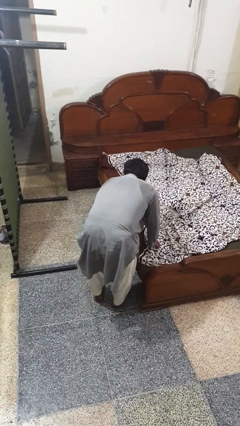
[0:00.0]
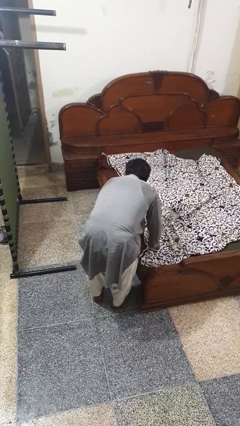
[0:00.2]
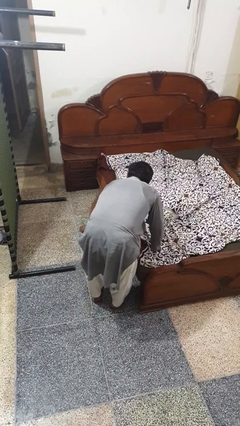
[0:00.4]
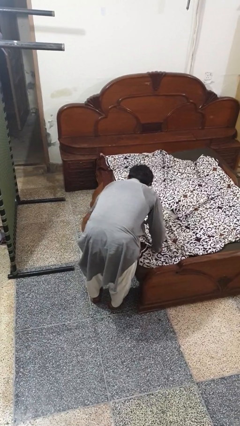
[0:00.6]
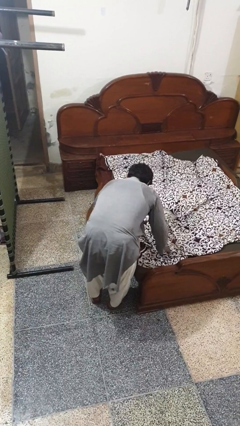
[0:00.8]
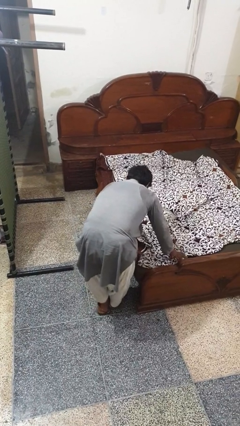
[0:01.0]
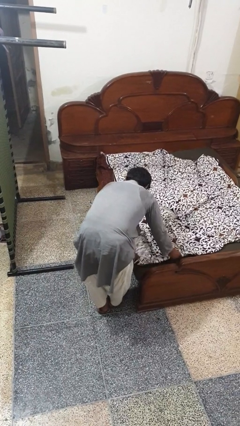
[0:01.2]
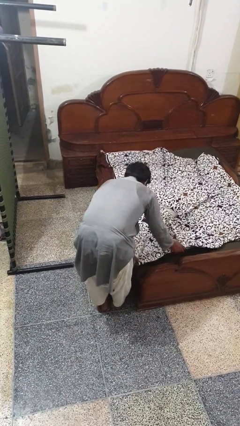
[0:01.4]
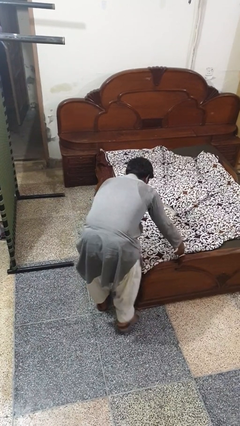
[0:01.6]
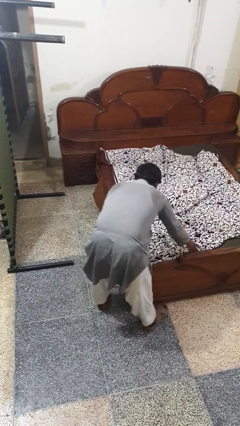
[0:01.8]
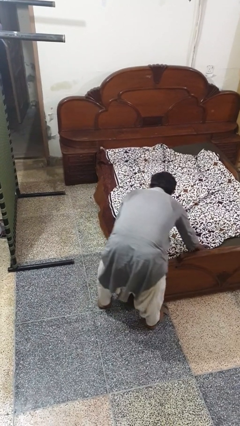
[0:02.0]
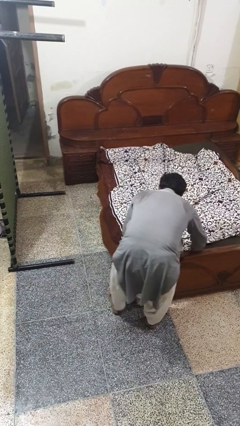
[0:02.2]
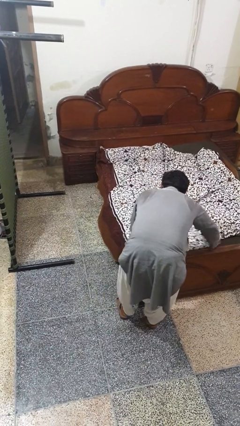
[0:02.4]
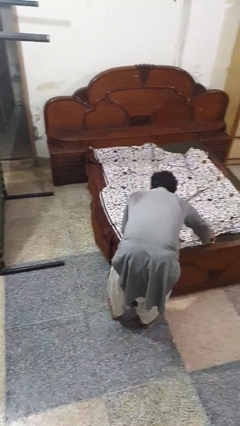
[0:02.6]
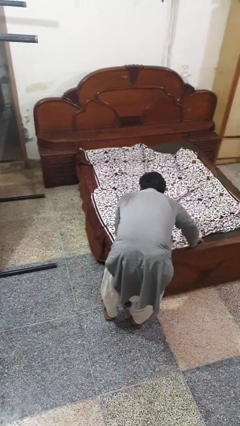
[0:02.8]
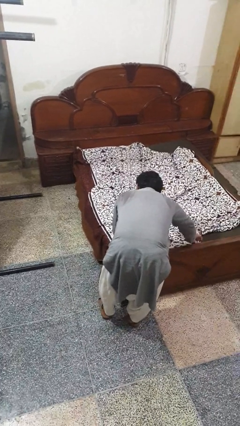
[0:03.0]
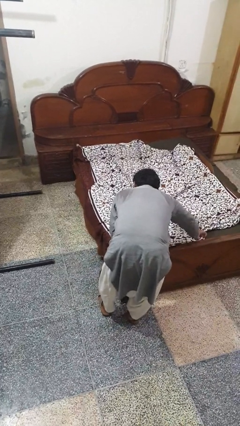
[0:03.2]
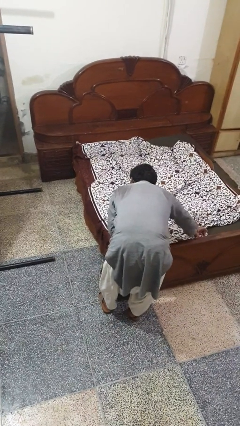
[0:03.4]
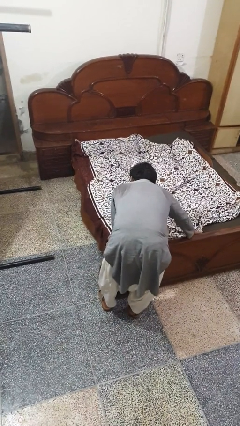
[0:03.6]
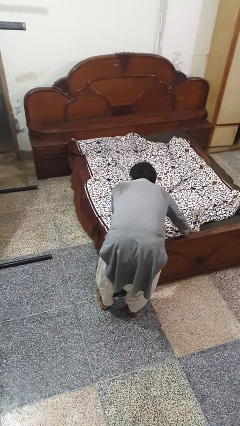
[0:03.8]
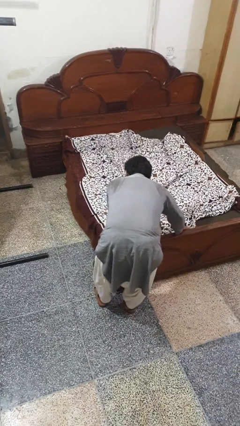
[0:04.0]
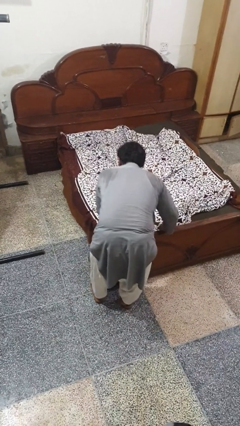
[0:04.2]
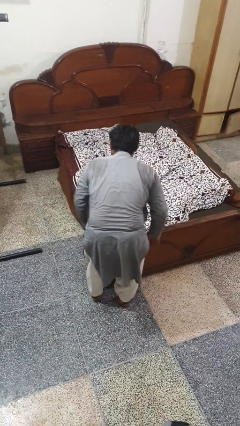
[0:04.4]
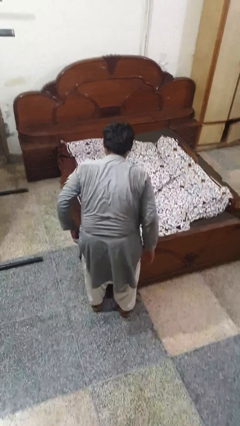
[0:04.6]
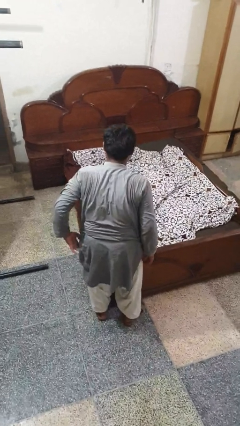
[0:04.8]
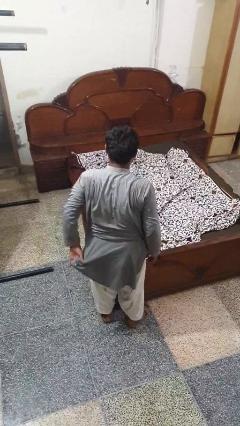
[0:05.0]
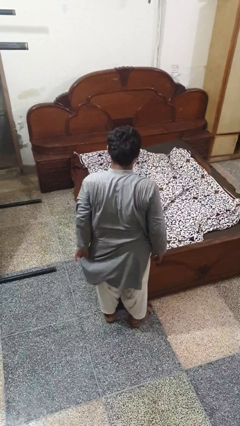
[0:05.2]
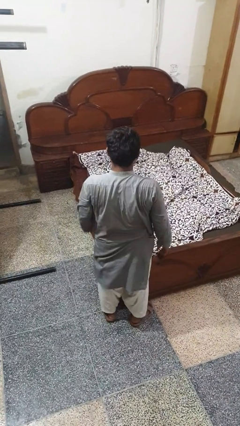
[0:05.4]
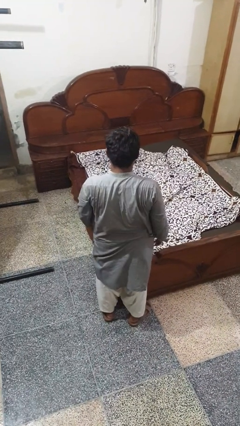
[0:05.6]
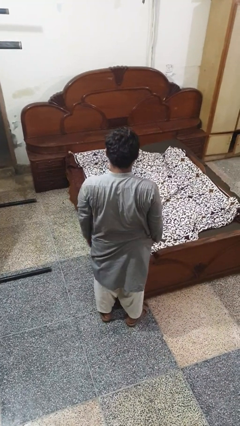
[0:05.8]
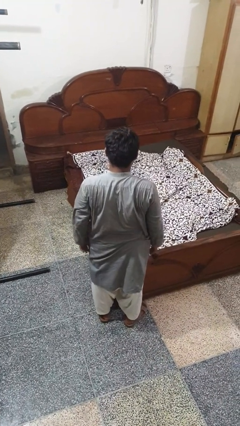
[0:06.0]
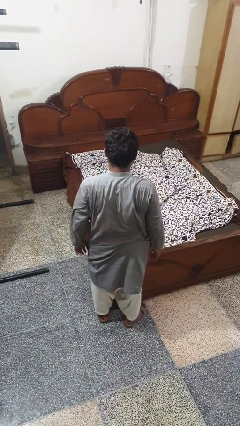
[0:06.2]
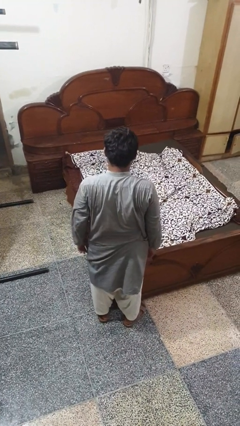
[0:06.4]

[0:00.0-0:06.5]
person makes bed

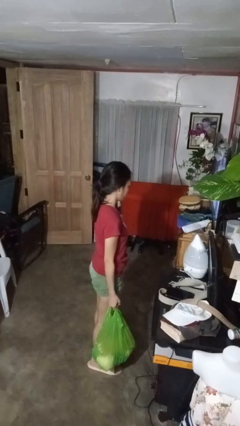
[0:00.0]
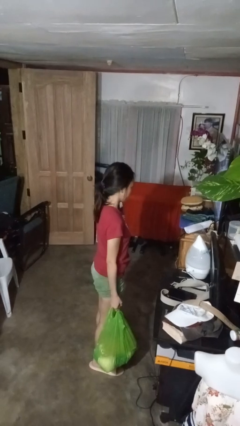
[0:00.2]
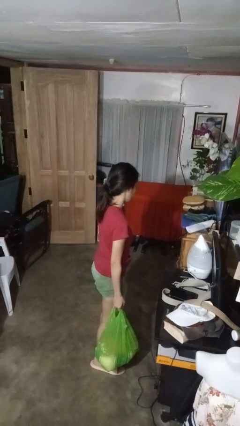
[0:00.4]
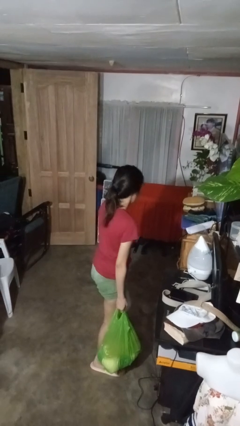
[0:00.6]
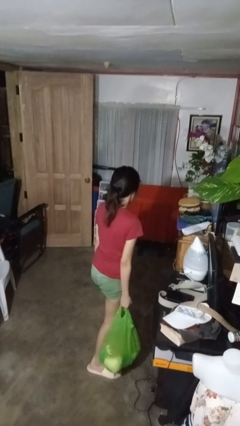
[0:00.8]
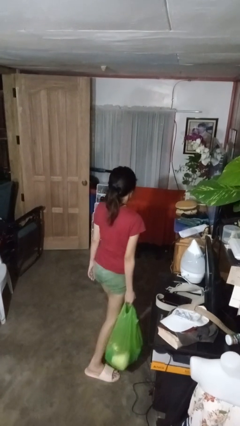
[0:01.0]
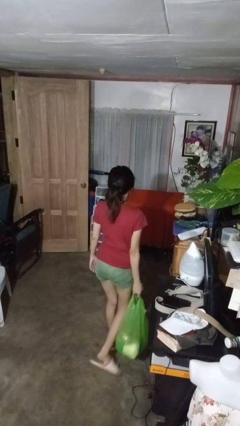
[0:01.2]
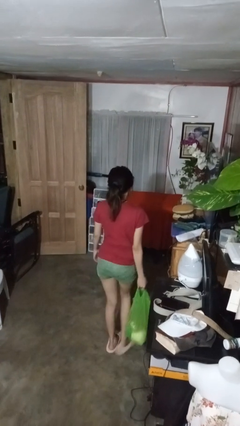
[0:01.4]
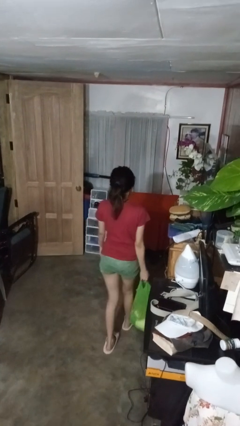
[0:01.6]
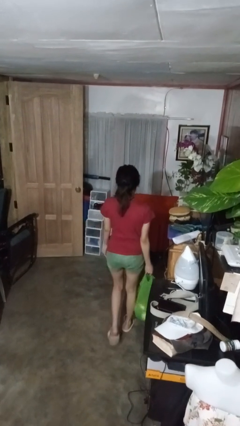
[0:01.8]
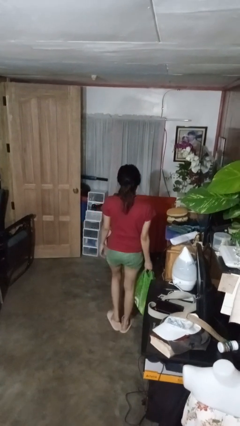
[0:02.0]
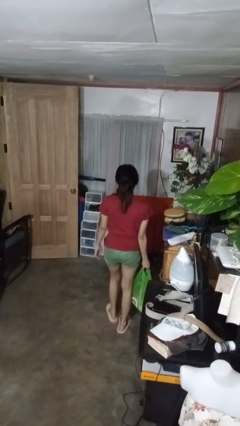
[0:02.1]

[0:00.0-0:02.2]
person carries groceries

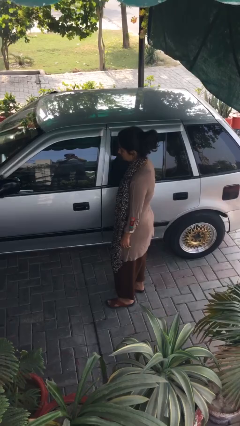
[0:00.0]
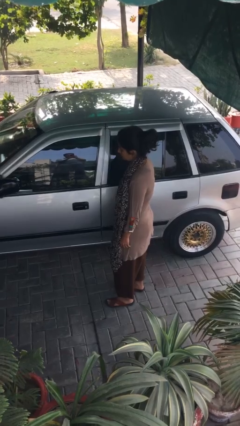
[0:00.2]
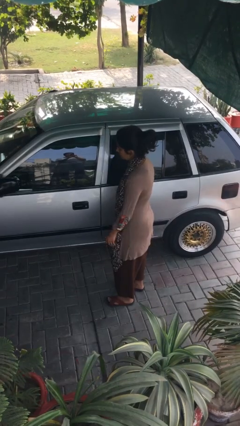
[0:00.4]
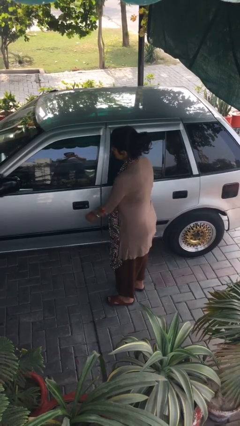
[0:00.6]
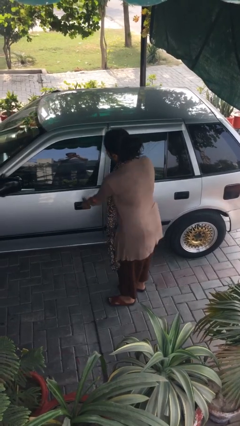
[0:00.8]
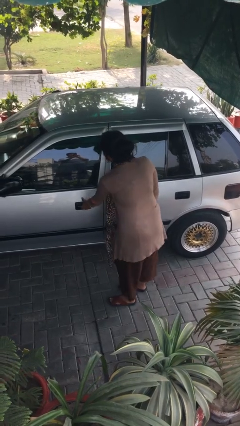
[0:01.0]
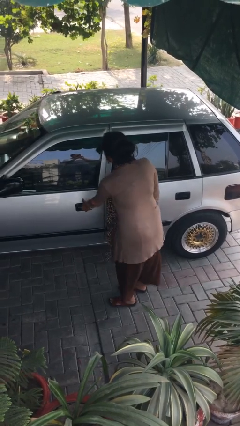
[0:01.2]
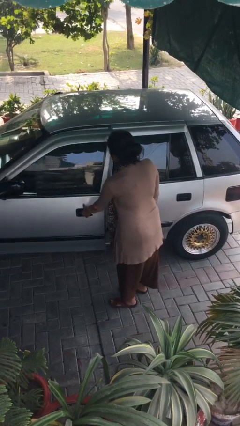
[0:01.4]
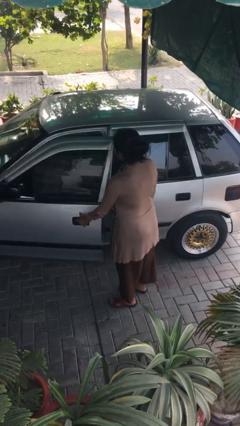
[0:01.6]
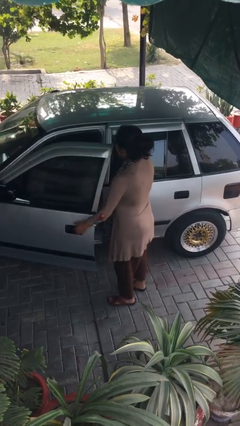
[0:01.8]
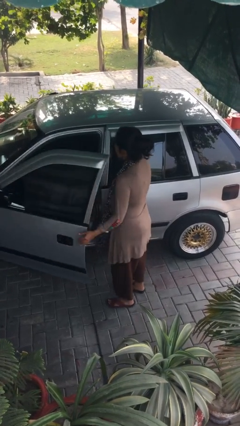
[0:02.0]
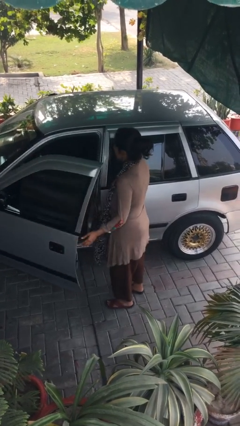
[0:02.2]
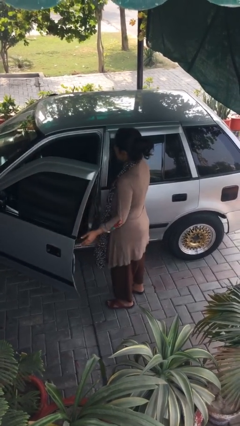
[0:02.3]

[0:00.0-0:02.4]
person opens car door

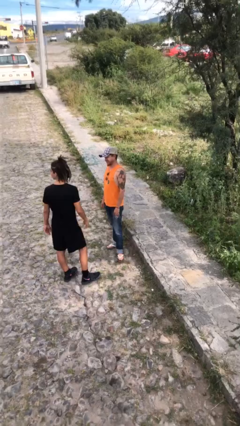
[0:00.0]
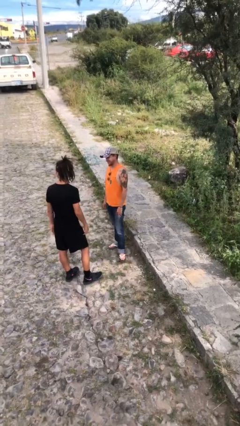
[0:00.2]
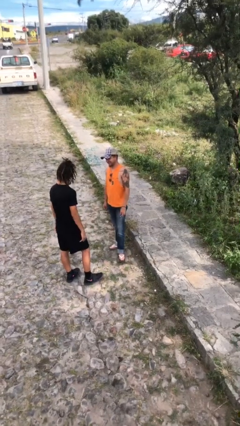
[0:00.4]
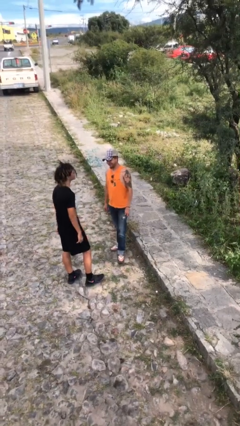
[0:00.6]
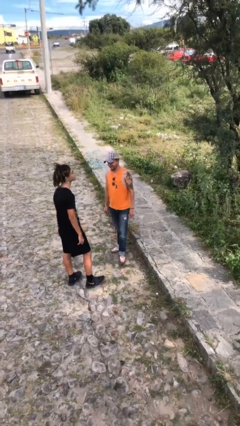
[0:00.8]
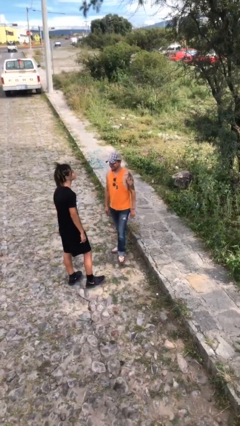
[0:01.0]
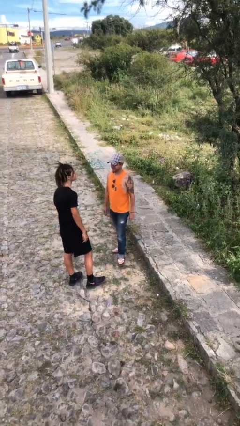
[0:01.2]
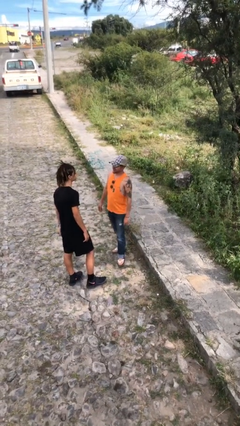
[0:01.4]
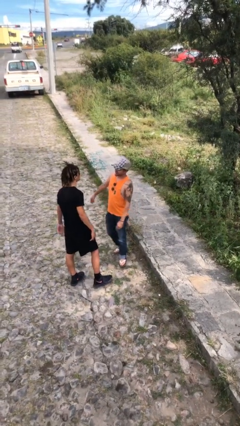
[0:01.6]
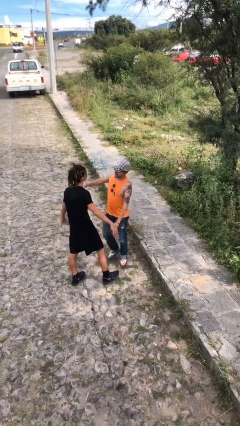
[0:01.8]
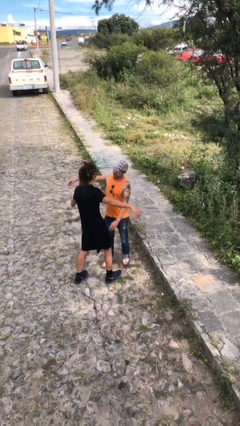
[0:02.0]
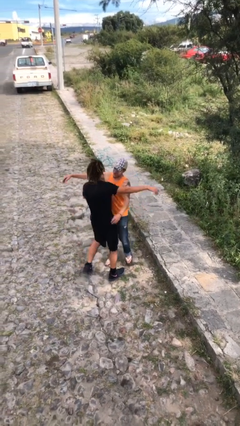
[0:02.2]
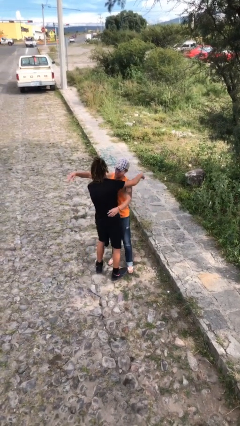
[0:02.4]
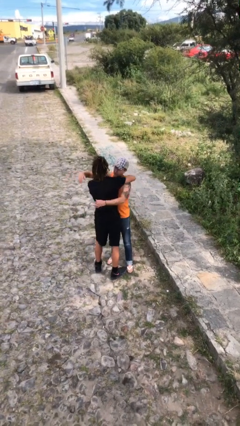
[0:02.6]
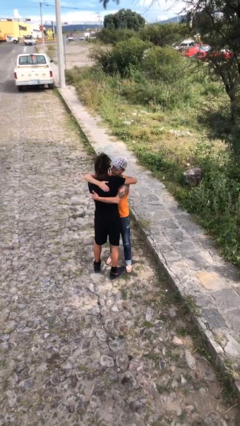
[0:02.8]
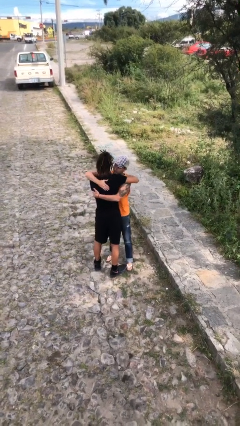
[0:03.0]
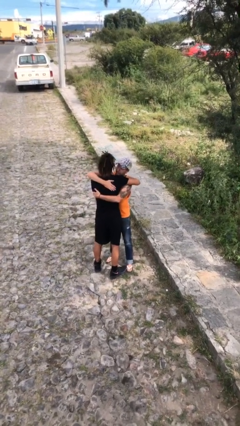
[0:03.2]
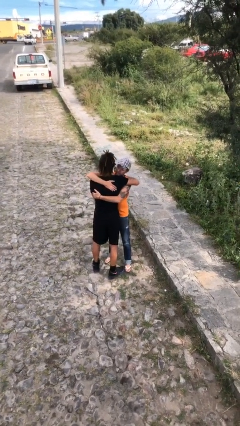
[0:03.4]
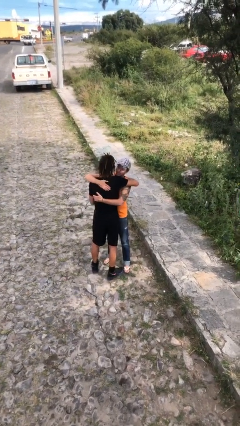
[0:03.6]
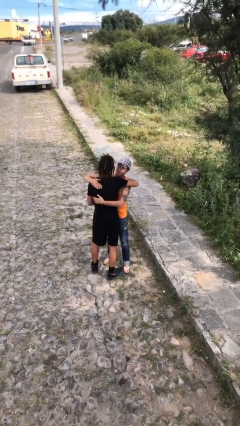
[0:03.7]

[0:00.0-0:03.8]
person embraces person

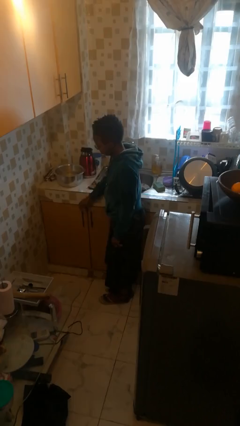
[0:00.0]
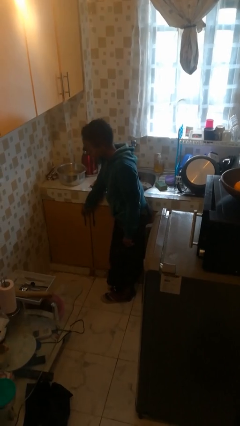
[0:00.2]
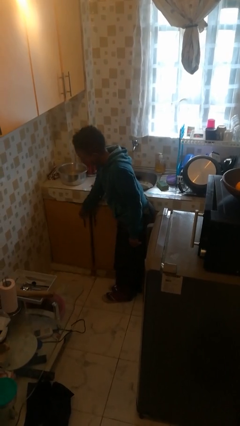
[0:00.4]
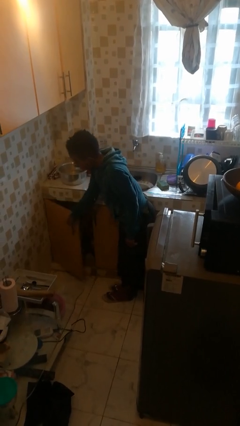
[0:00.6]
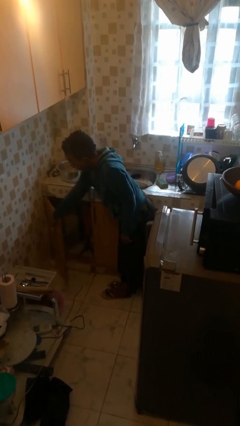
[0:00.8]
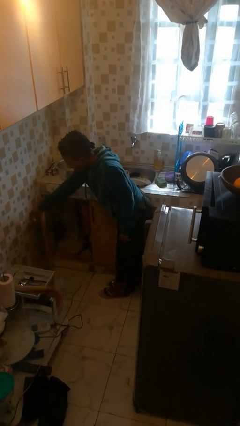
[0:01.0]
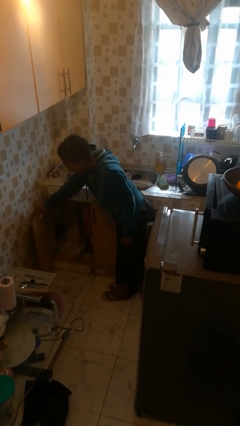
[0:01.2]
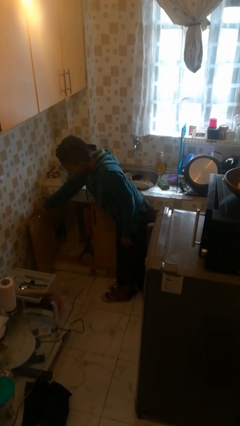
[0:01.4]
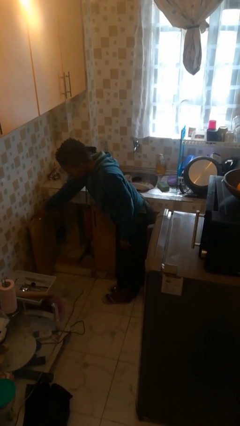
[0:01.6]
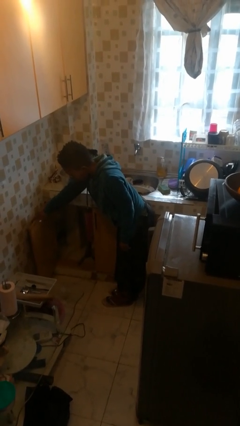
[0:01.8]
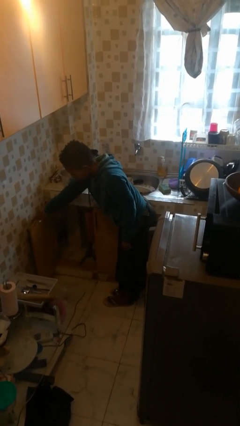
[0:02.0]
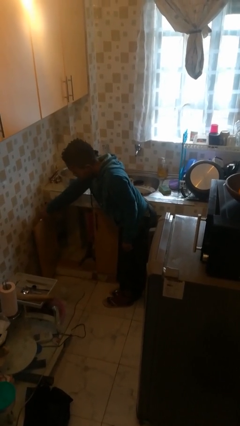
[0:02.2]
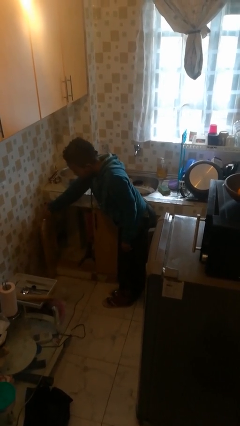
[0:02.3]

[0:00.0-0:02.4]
person opens cabinet

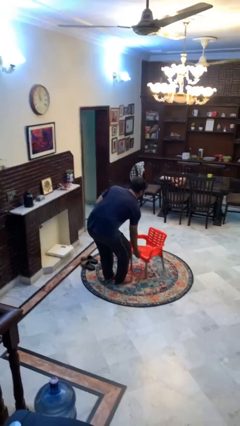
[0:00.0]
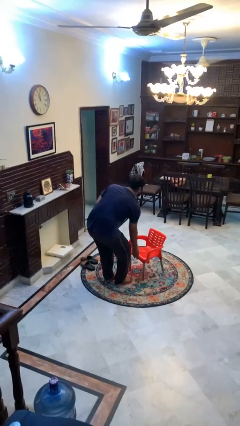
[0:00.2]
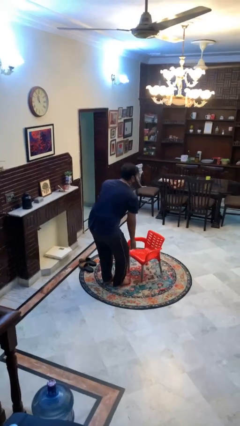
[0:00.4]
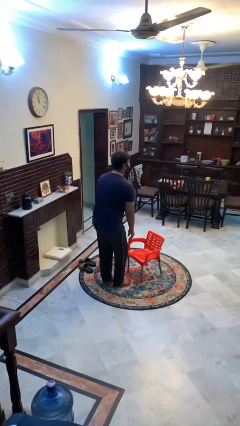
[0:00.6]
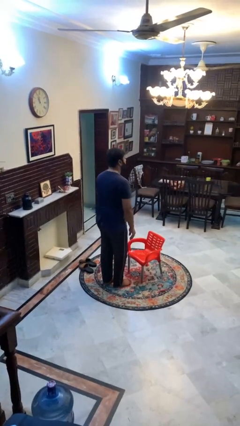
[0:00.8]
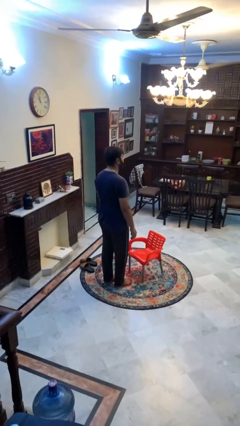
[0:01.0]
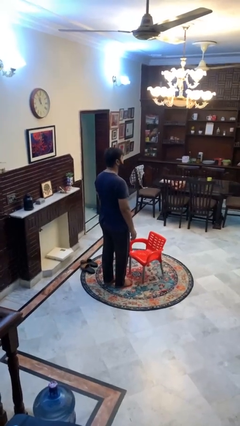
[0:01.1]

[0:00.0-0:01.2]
person sets upright furniture
